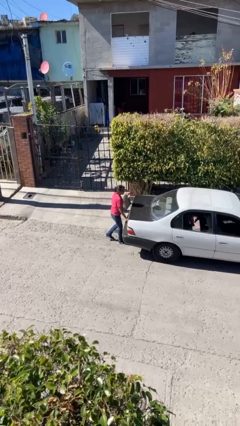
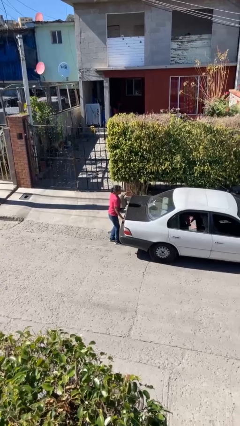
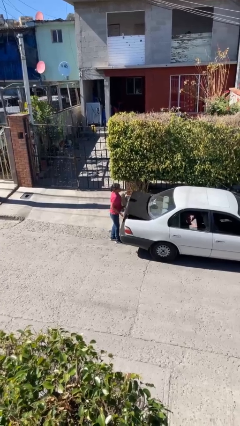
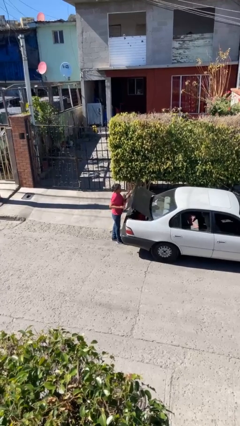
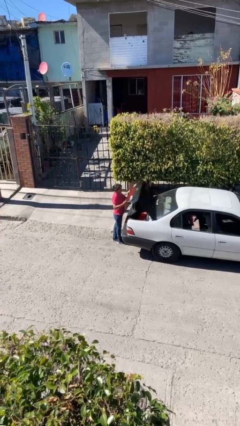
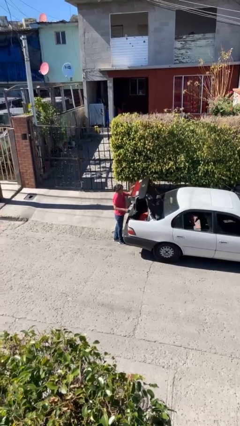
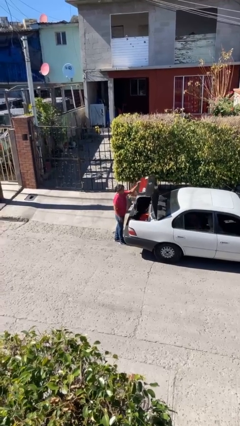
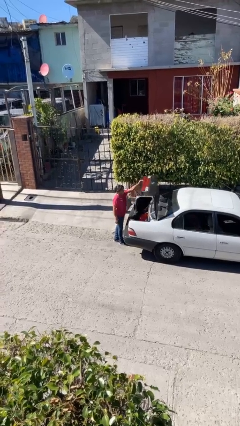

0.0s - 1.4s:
person opens car trunk

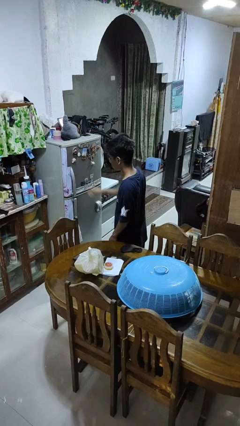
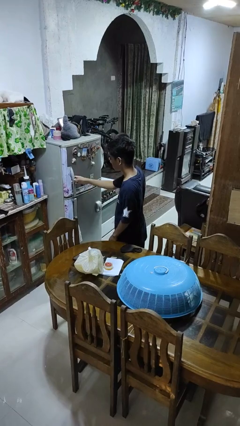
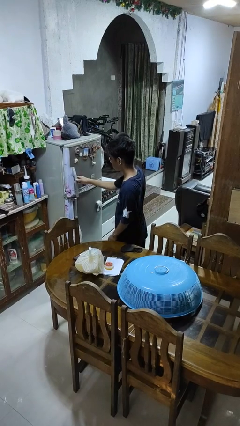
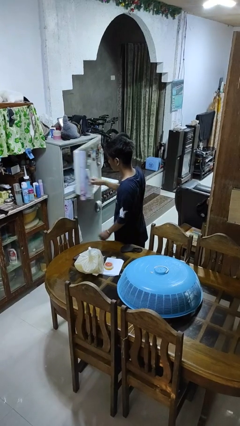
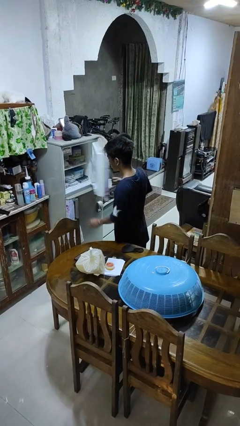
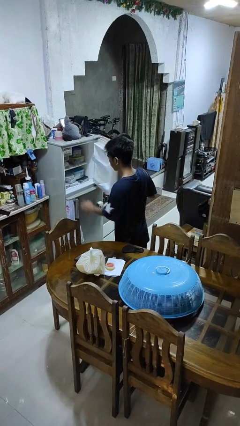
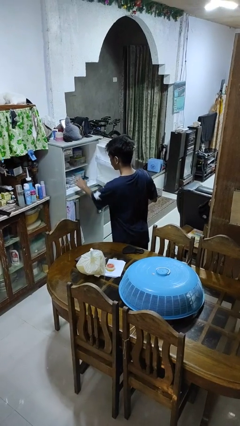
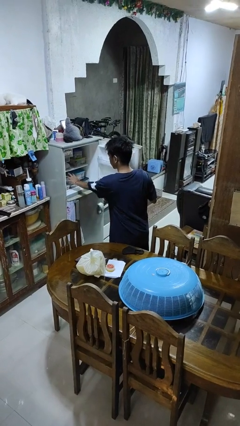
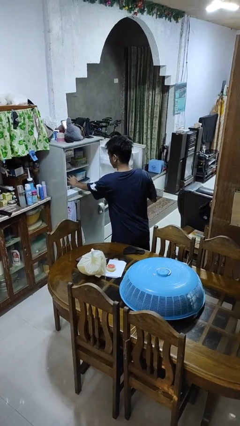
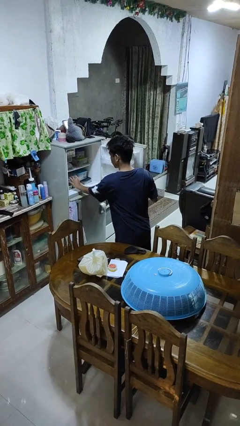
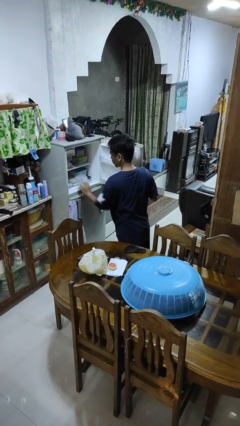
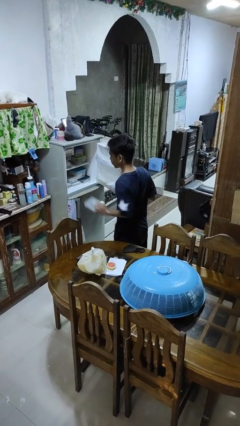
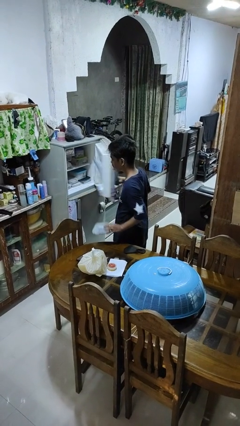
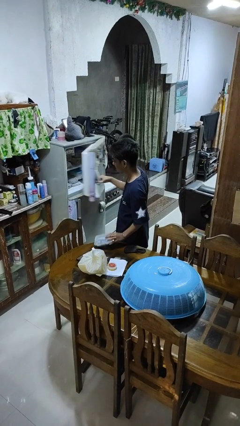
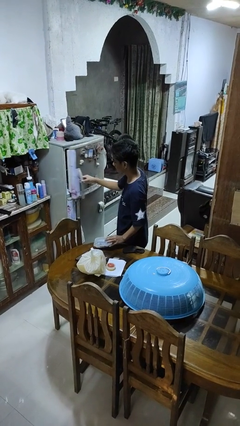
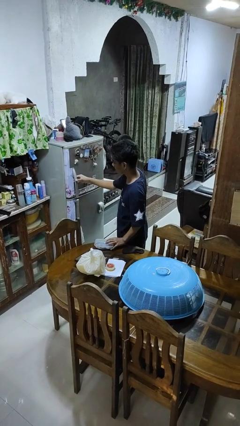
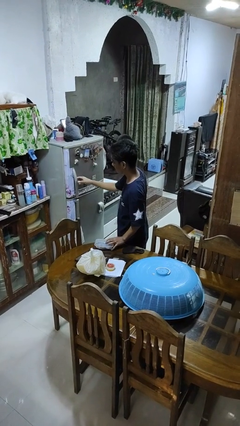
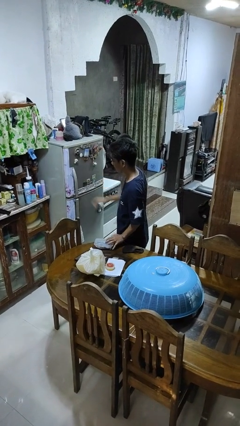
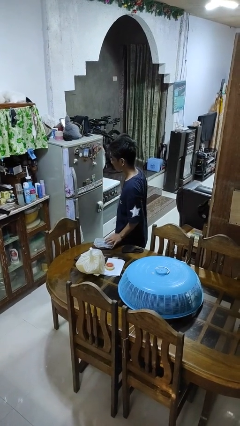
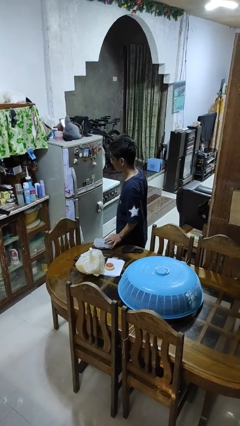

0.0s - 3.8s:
person takes object from refrigerator

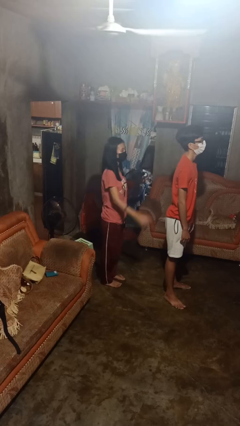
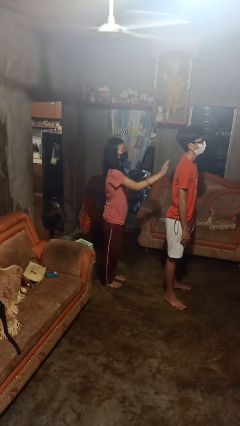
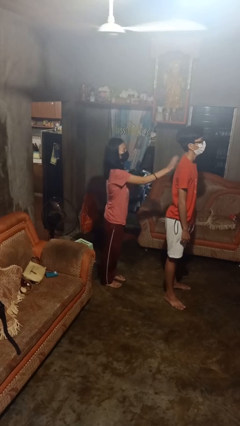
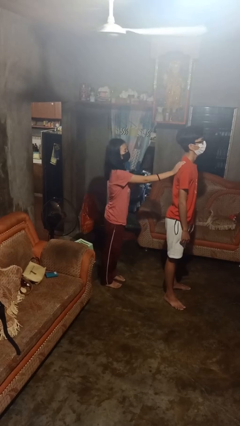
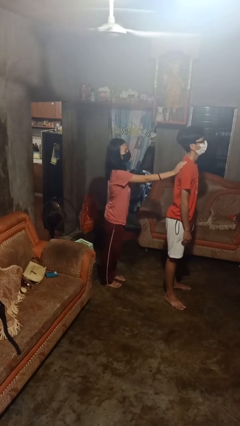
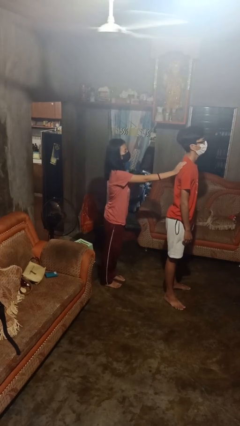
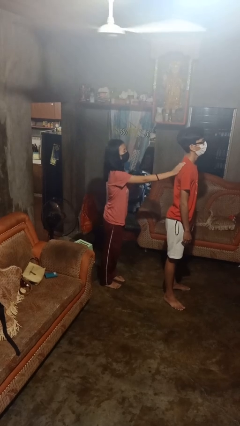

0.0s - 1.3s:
person touches back of person

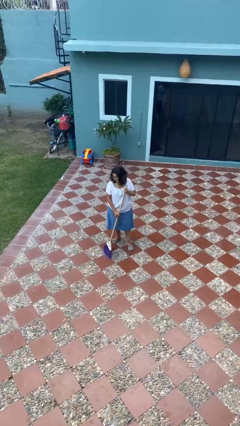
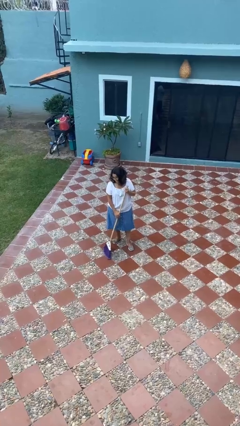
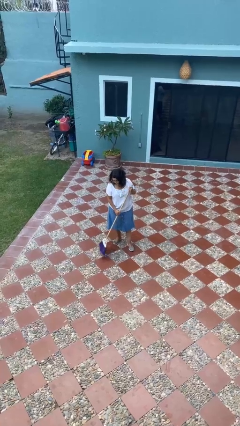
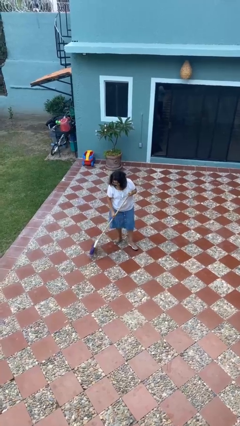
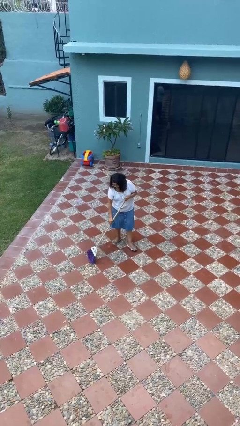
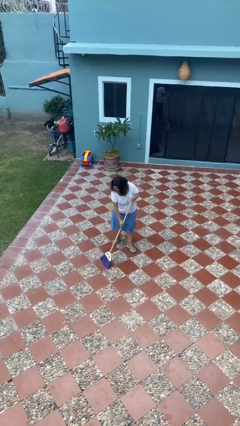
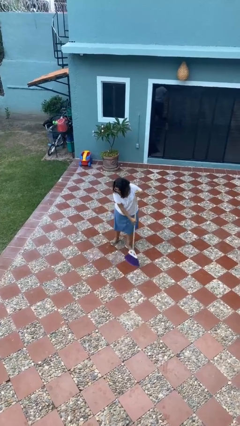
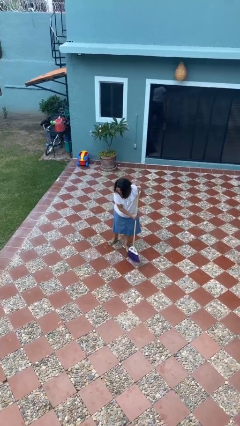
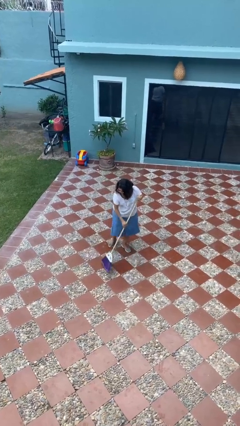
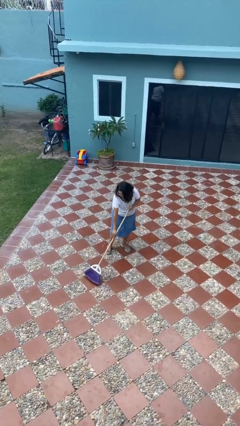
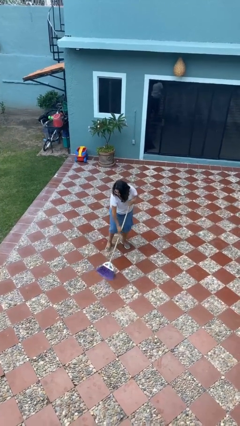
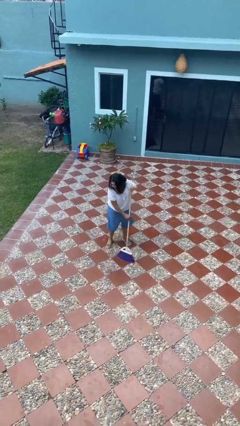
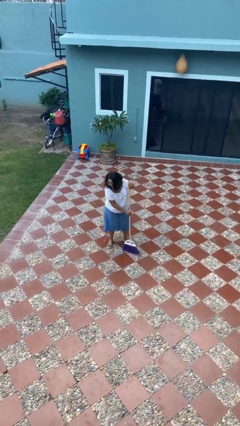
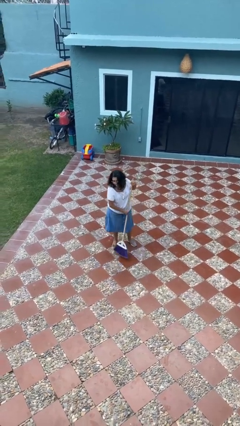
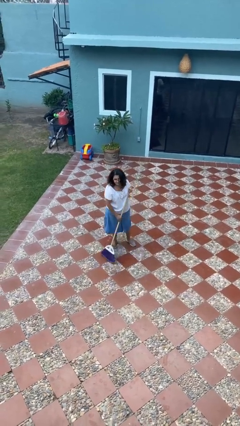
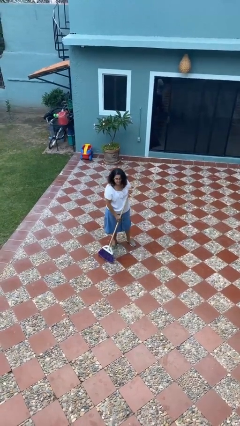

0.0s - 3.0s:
person sweeps floor

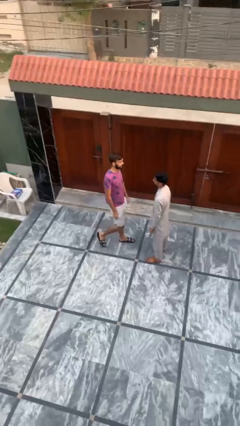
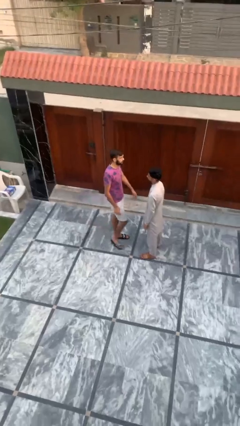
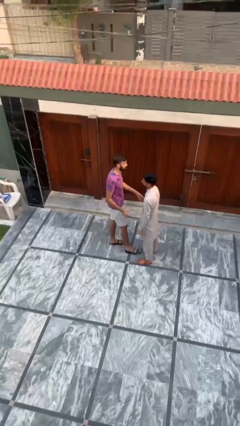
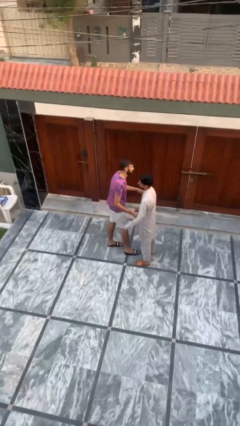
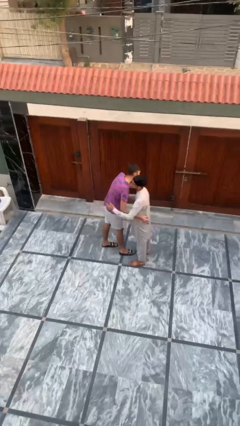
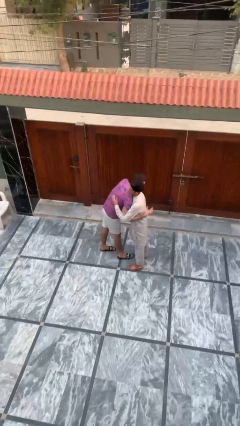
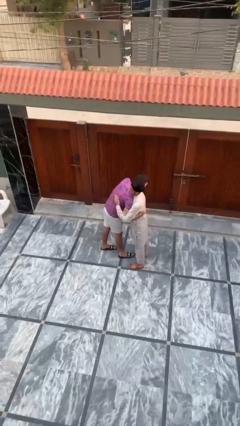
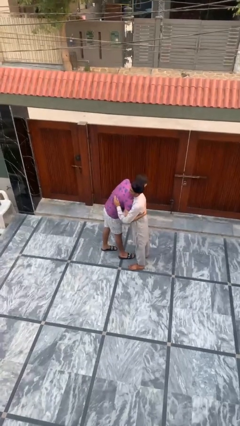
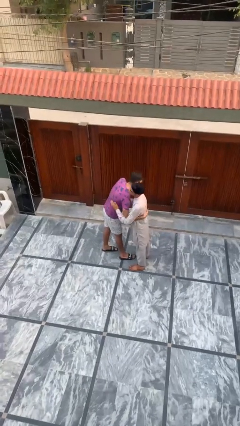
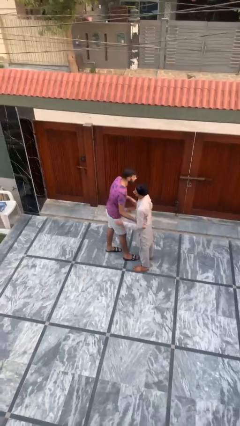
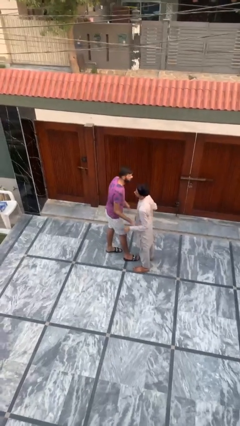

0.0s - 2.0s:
person embraces person

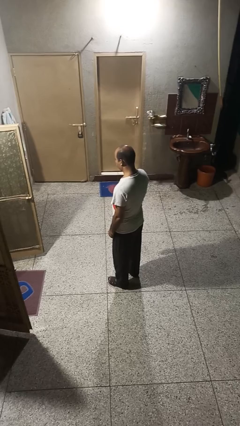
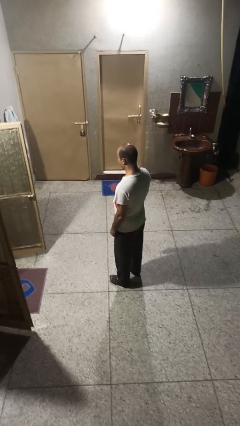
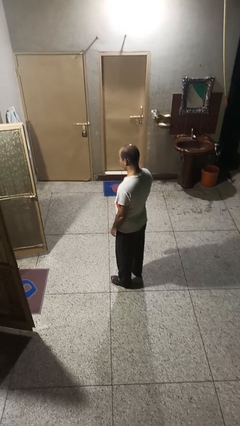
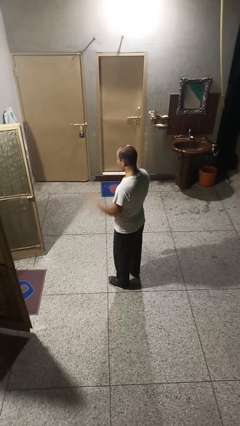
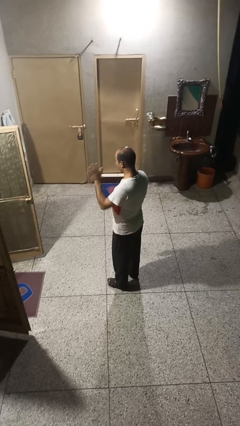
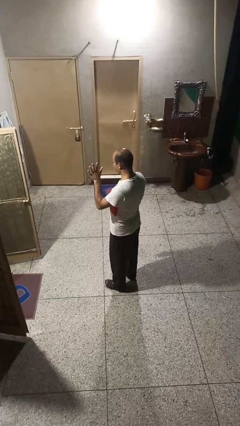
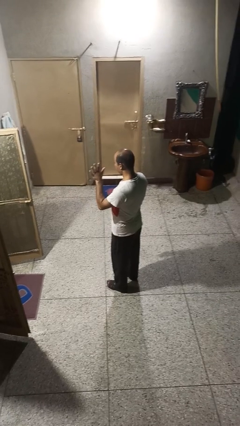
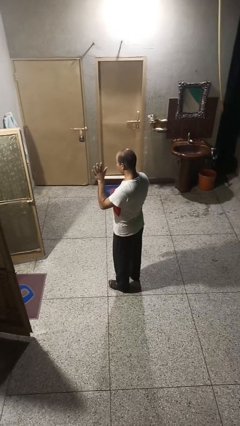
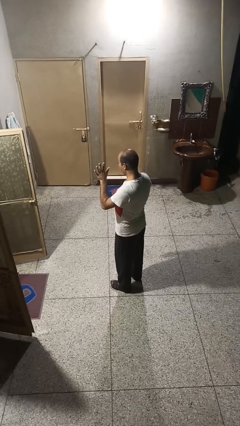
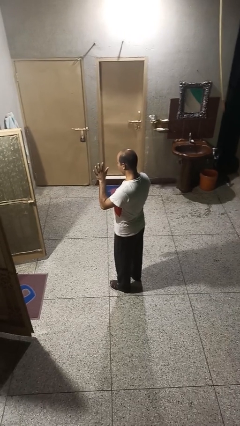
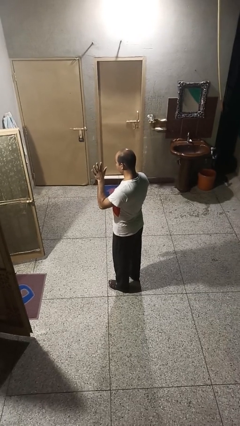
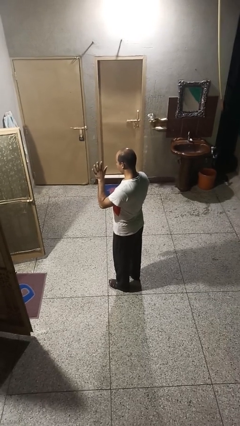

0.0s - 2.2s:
person gestures number five

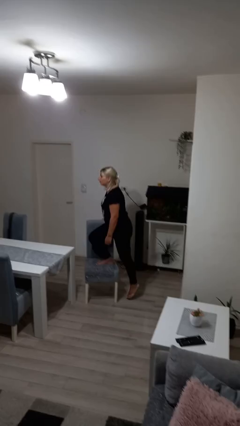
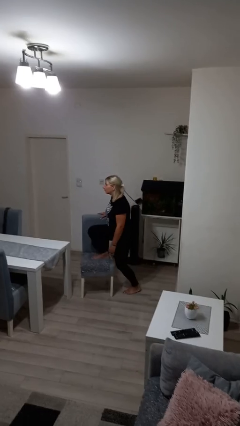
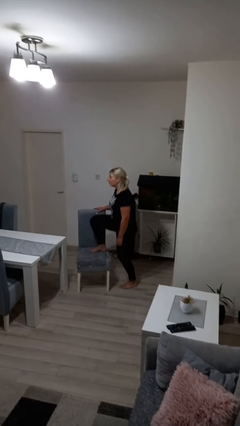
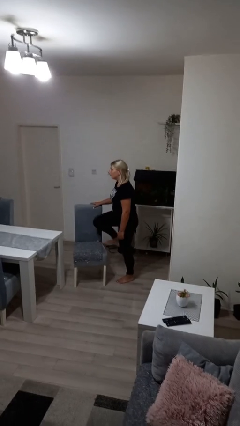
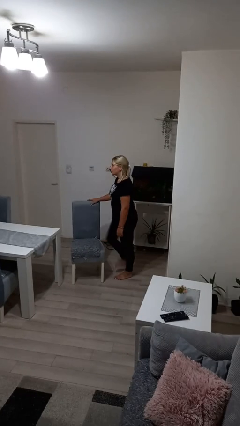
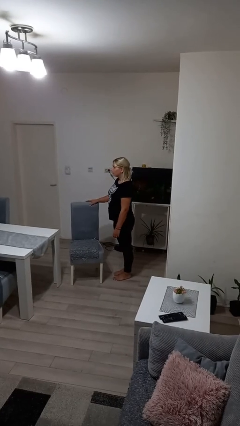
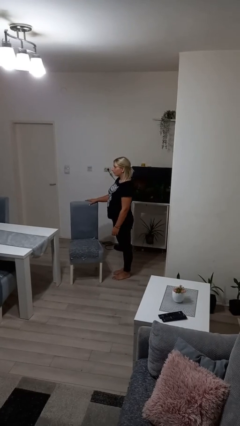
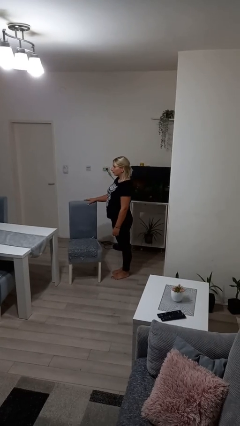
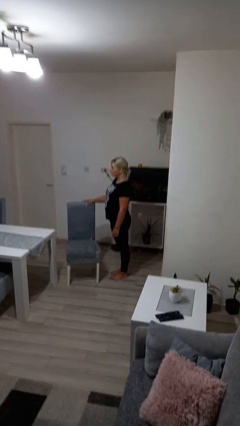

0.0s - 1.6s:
person climbs off chair

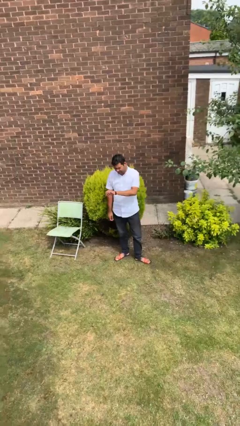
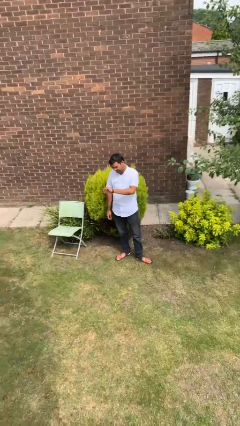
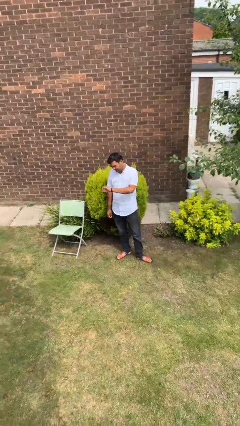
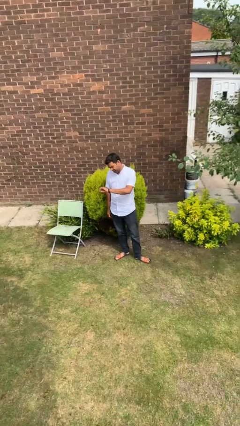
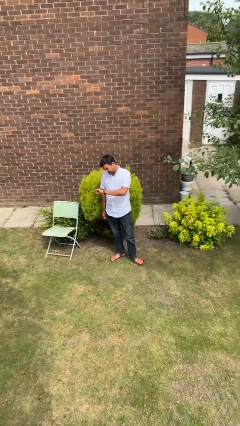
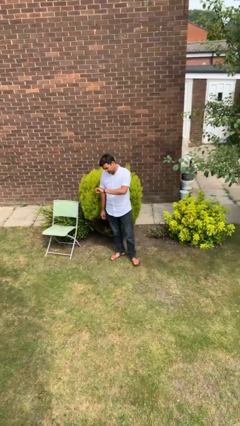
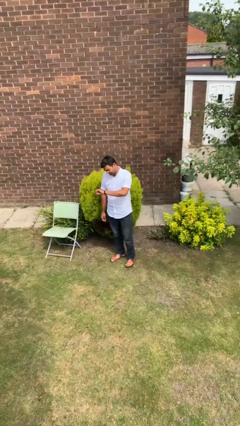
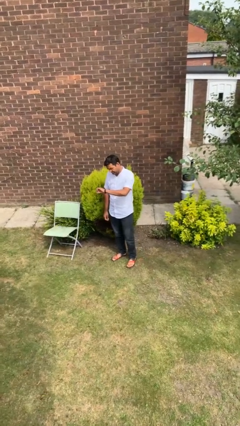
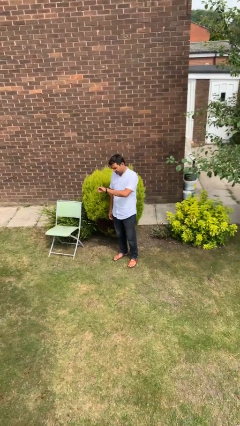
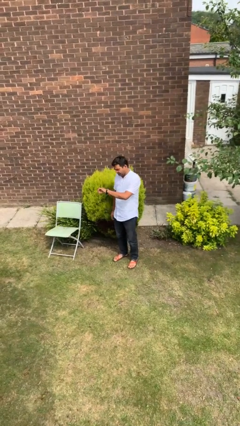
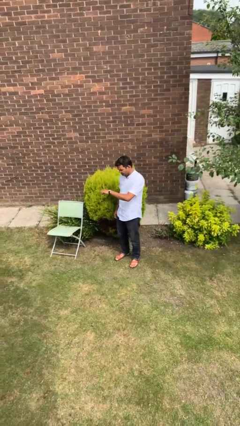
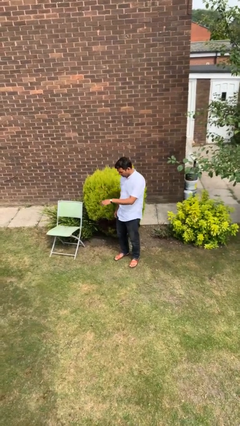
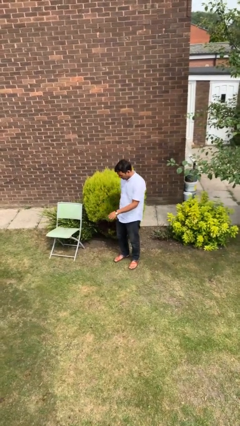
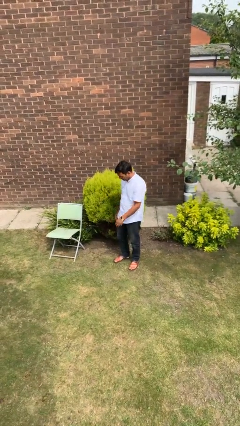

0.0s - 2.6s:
person looks at wristwatch
